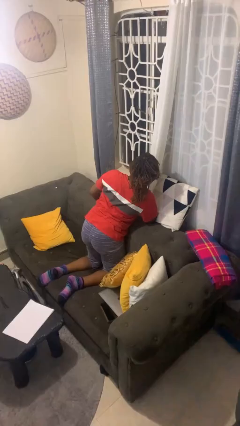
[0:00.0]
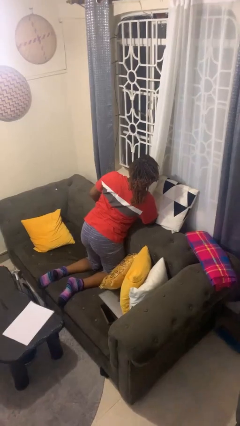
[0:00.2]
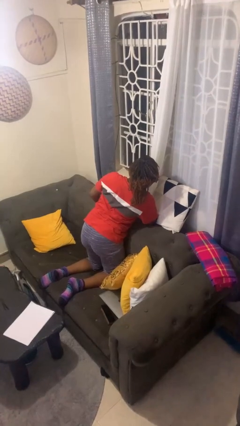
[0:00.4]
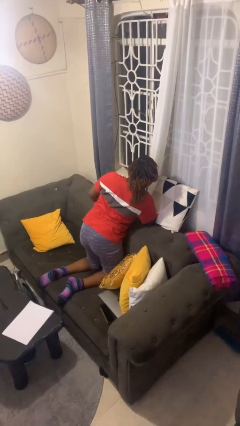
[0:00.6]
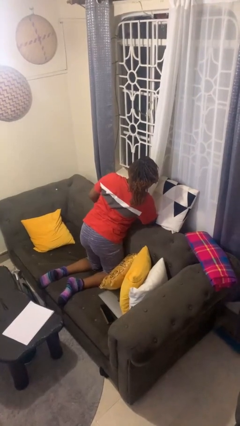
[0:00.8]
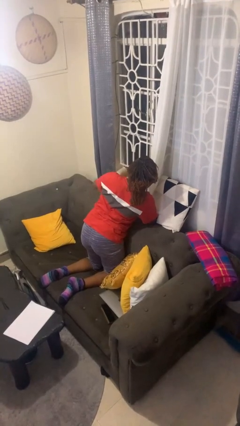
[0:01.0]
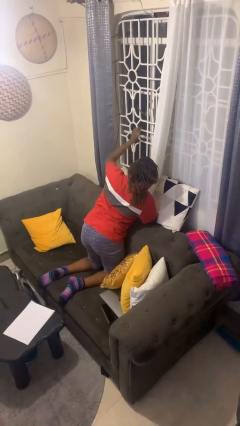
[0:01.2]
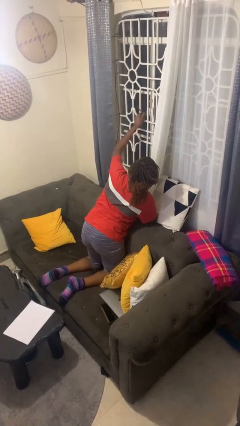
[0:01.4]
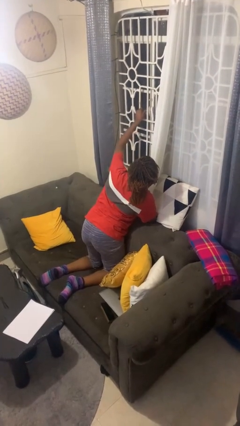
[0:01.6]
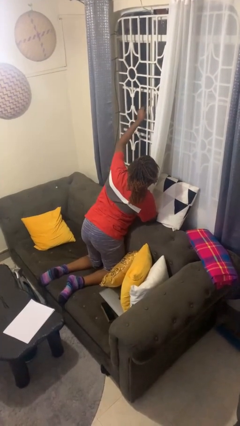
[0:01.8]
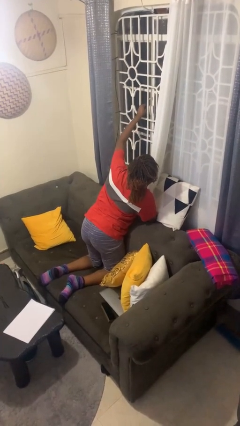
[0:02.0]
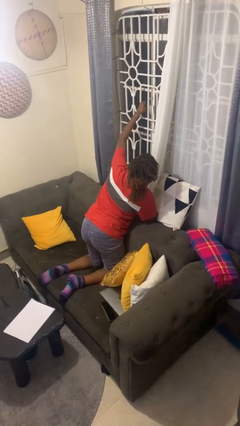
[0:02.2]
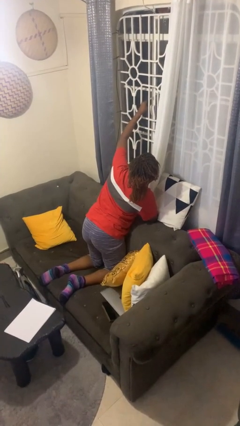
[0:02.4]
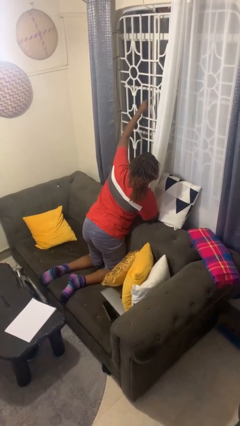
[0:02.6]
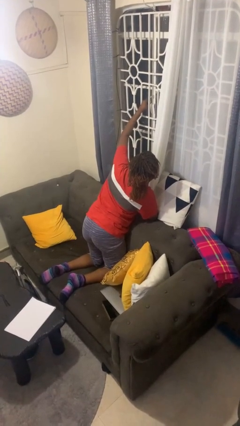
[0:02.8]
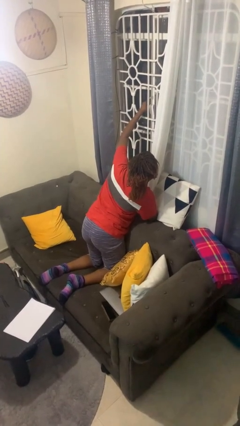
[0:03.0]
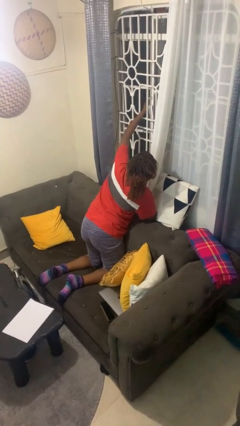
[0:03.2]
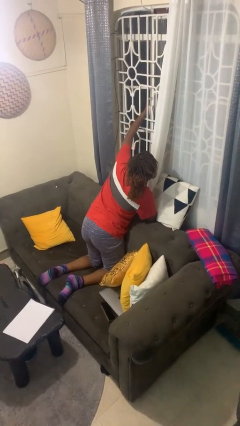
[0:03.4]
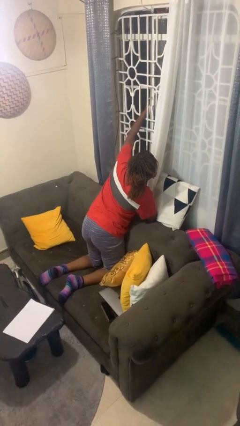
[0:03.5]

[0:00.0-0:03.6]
person opens home window

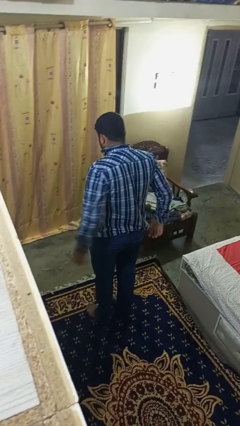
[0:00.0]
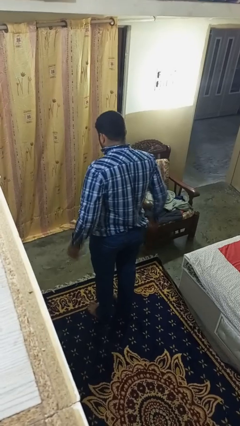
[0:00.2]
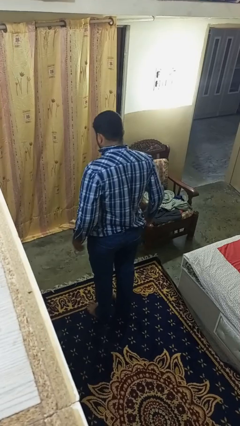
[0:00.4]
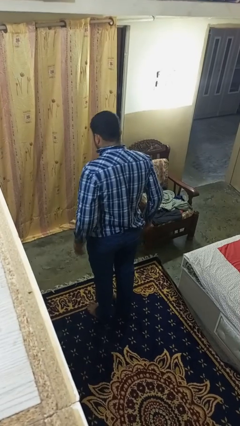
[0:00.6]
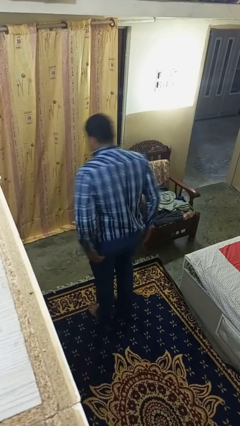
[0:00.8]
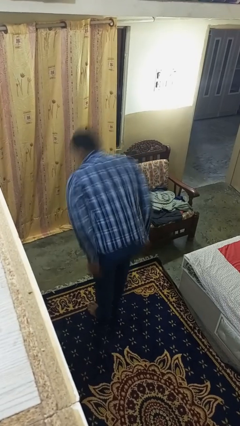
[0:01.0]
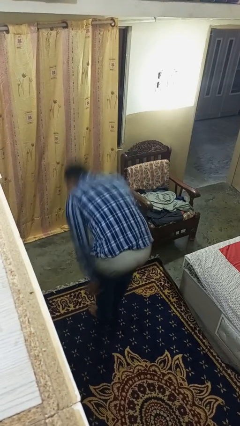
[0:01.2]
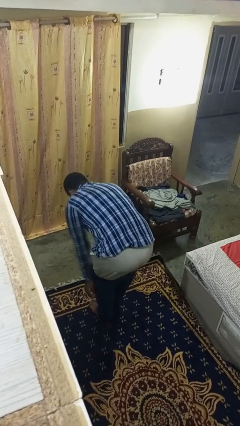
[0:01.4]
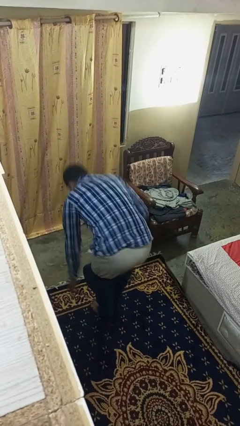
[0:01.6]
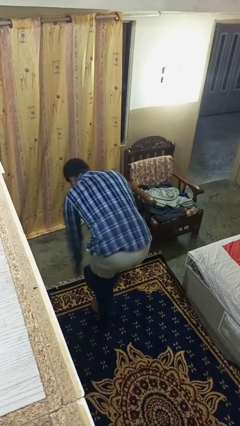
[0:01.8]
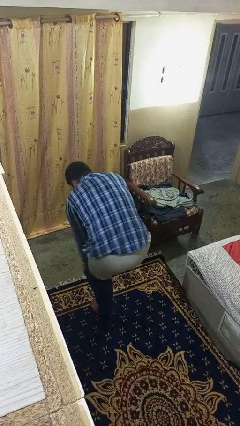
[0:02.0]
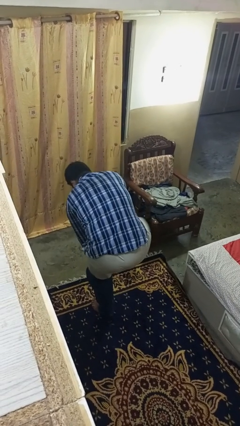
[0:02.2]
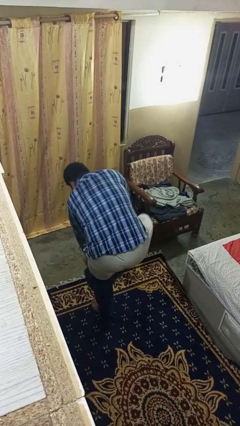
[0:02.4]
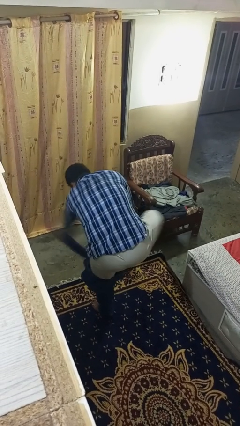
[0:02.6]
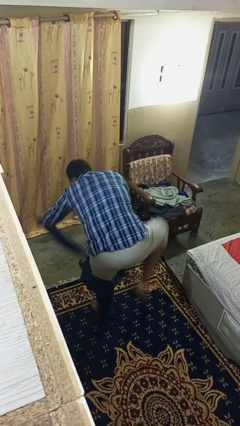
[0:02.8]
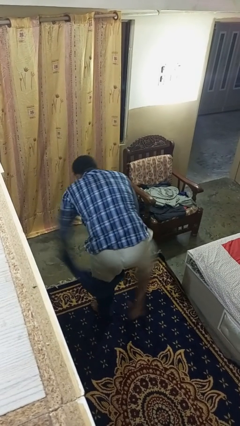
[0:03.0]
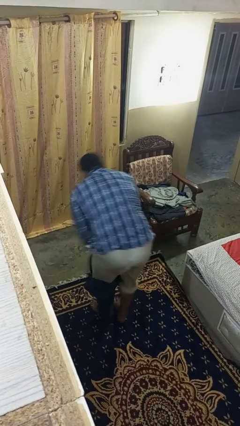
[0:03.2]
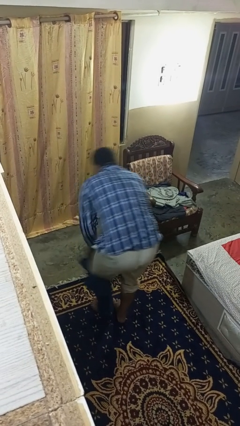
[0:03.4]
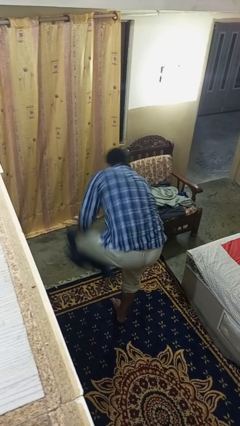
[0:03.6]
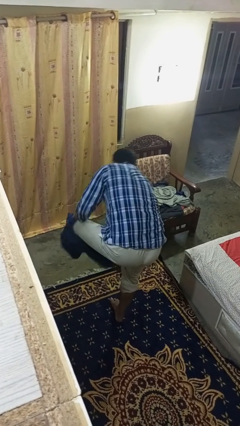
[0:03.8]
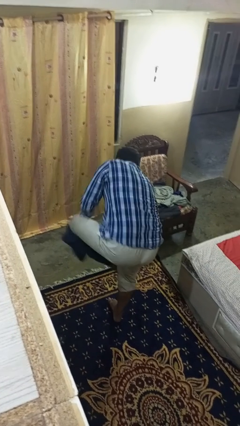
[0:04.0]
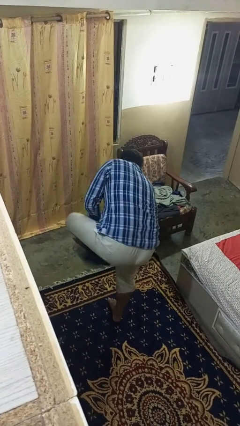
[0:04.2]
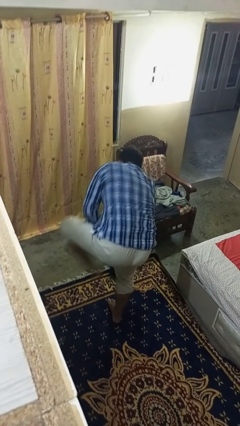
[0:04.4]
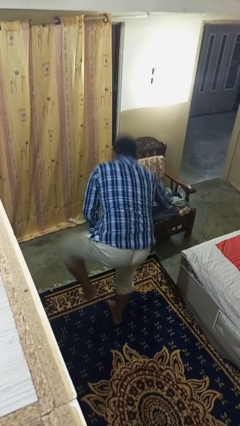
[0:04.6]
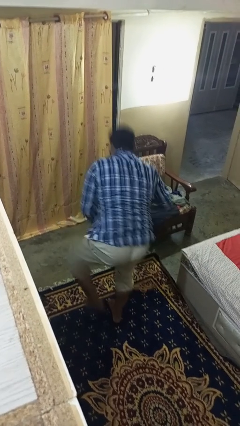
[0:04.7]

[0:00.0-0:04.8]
person takes off pants

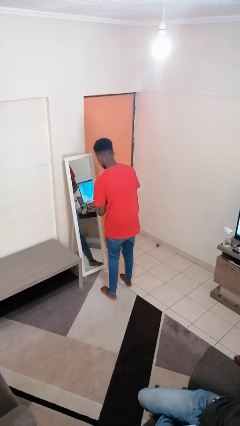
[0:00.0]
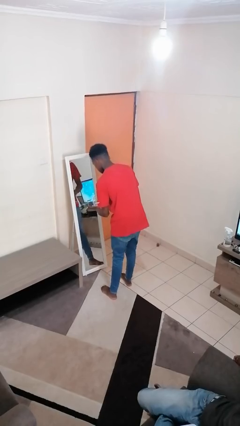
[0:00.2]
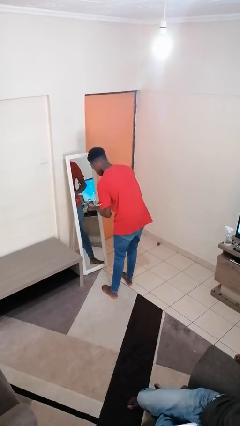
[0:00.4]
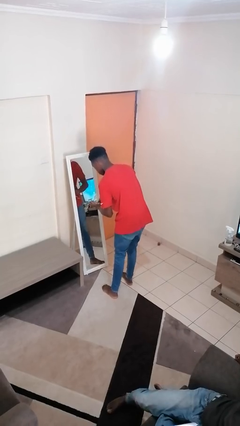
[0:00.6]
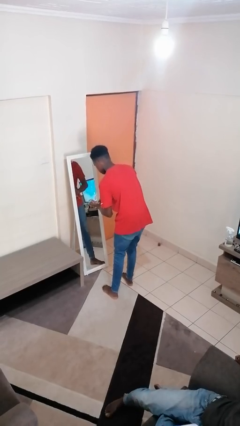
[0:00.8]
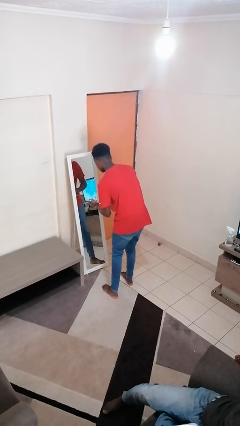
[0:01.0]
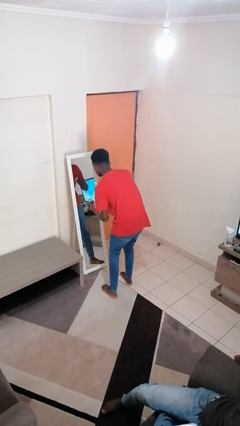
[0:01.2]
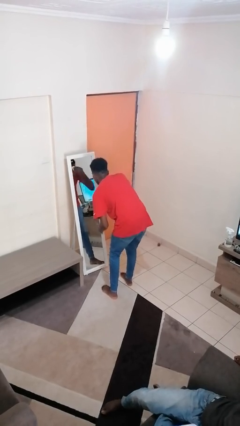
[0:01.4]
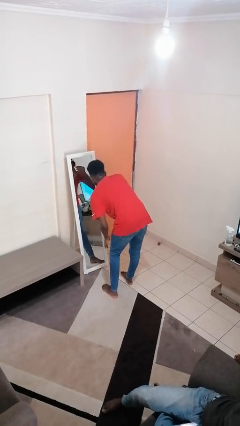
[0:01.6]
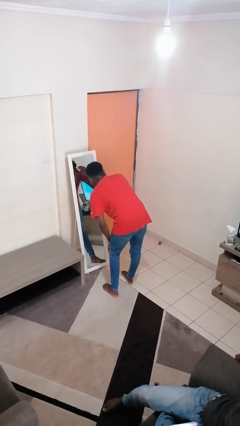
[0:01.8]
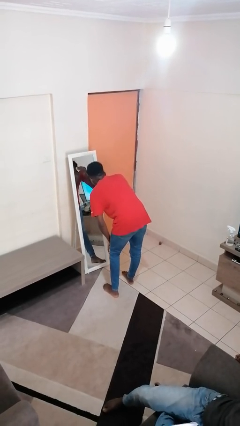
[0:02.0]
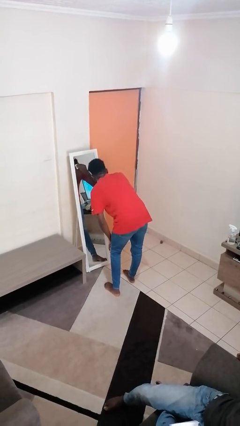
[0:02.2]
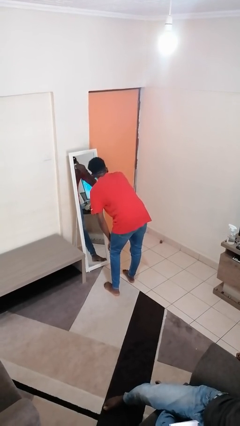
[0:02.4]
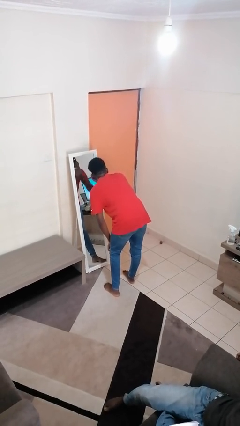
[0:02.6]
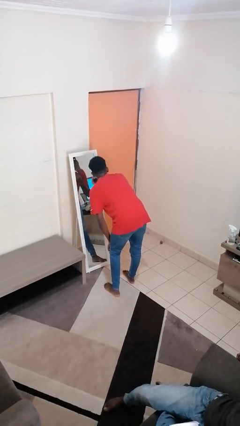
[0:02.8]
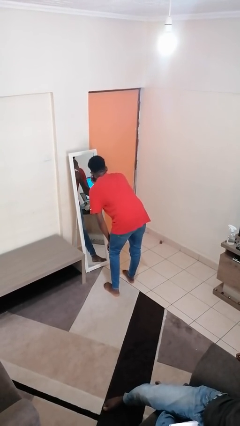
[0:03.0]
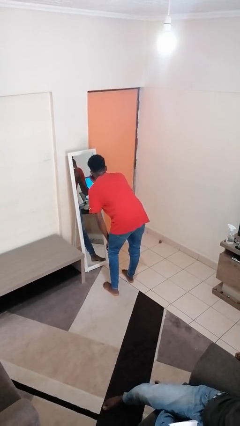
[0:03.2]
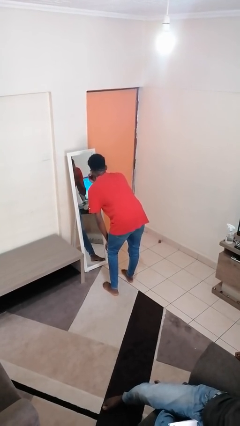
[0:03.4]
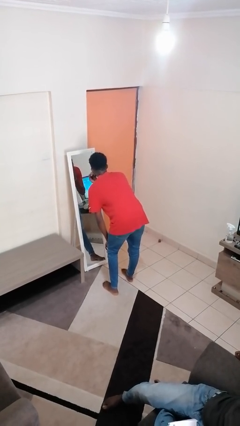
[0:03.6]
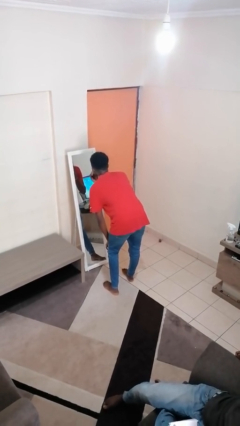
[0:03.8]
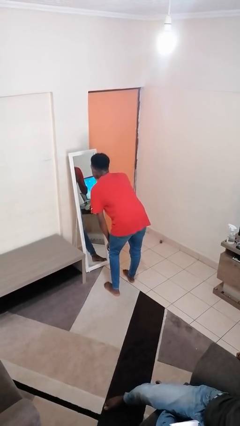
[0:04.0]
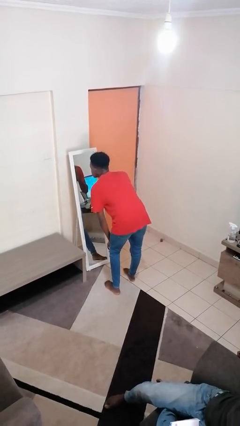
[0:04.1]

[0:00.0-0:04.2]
person applies foundation makeup

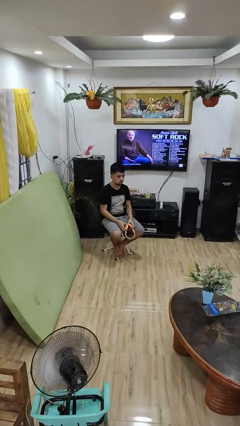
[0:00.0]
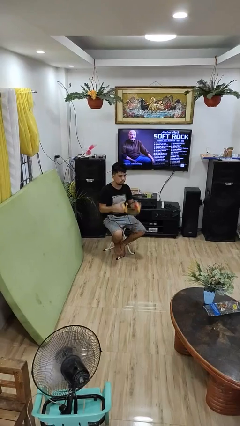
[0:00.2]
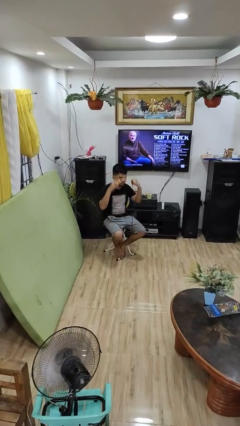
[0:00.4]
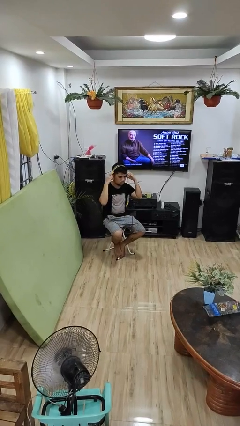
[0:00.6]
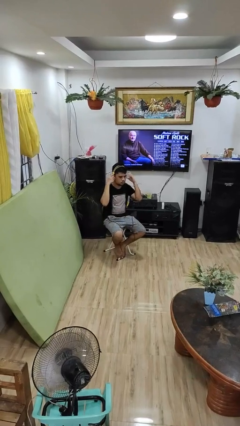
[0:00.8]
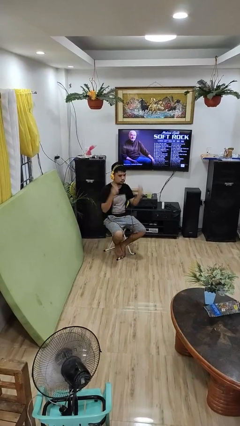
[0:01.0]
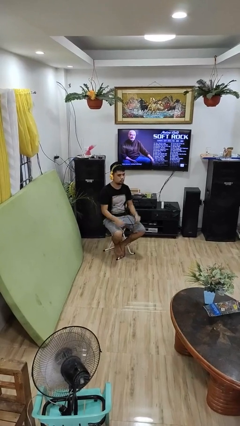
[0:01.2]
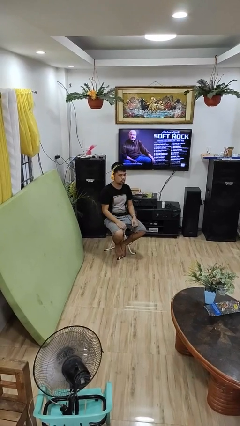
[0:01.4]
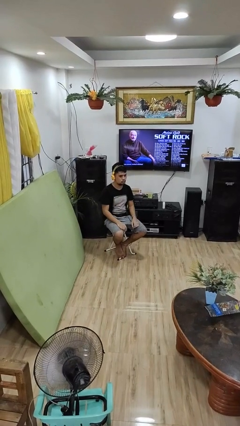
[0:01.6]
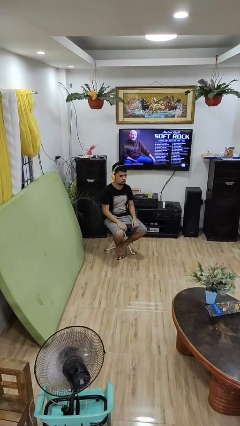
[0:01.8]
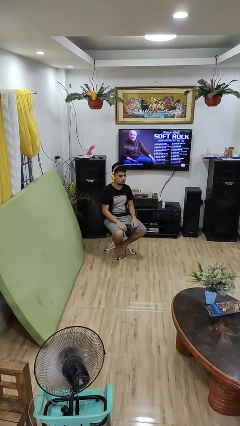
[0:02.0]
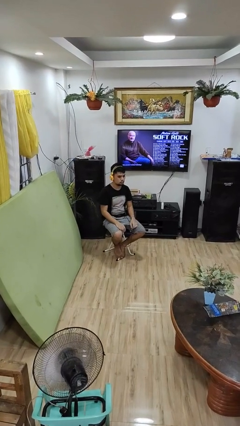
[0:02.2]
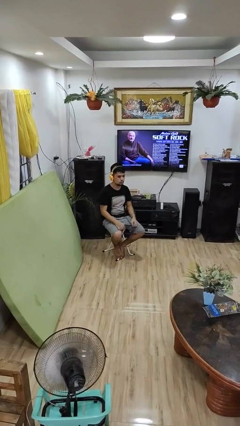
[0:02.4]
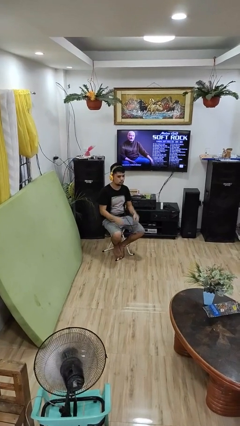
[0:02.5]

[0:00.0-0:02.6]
person puts on headphones

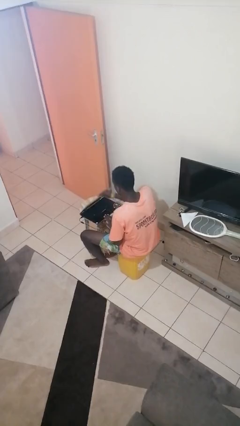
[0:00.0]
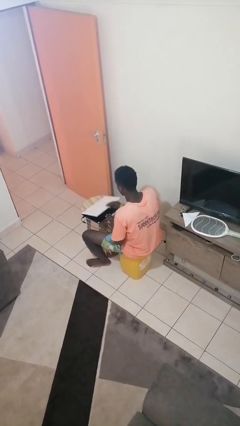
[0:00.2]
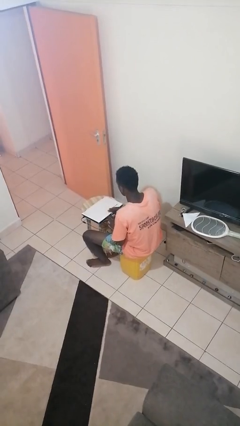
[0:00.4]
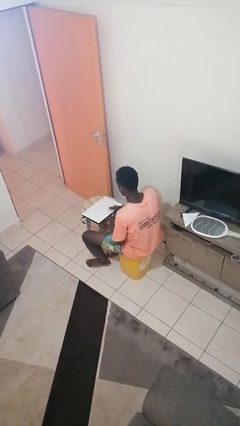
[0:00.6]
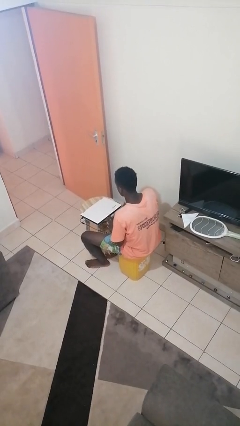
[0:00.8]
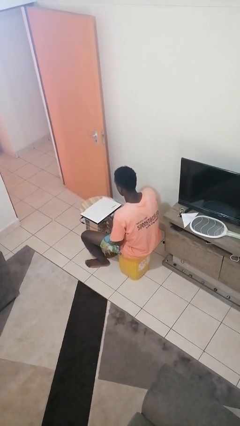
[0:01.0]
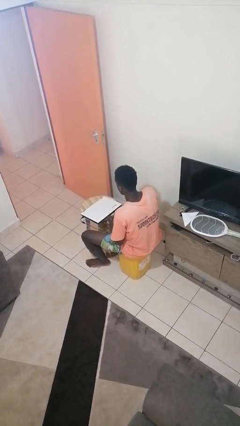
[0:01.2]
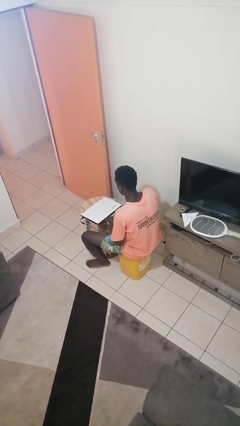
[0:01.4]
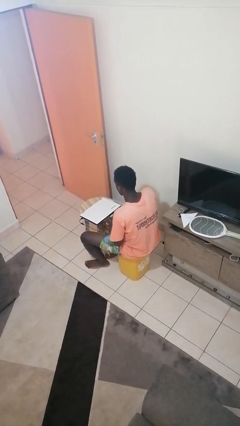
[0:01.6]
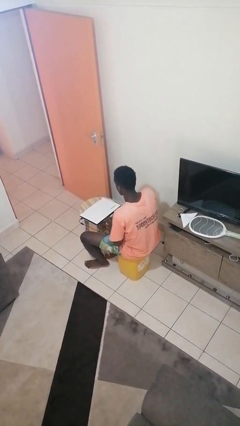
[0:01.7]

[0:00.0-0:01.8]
person closes laptop

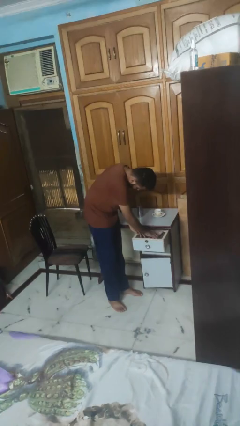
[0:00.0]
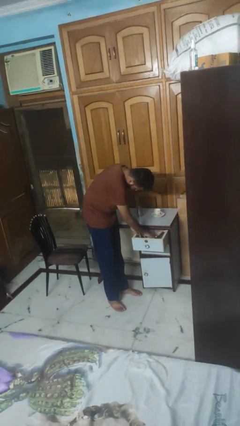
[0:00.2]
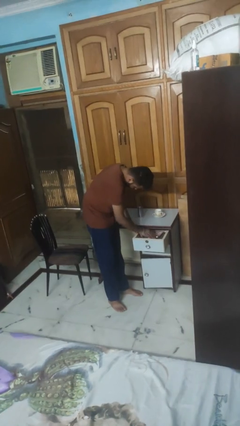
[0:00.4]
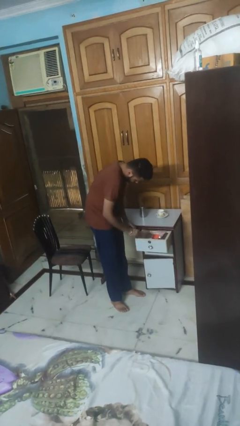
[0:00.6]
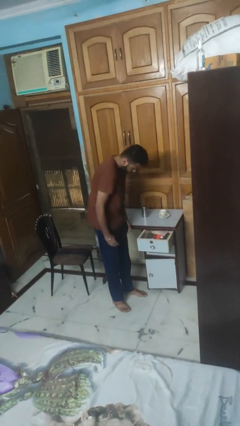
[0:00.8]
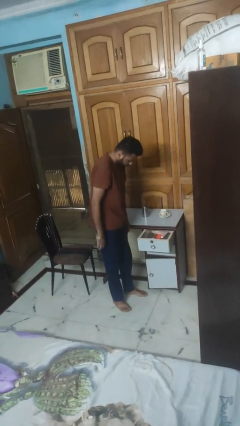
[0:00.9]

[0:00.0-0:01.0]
person searches in kitchen drawer
